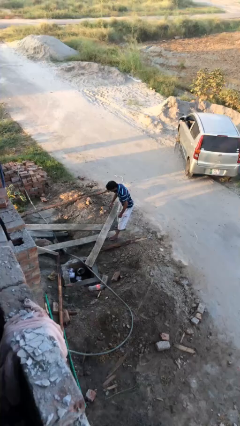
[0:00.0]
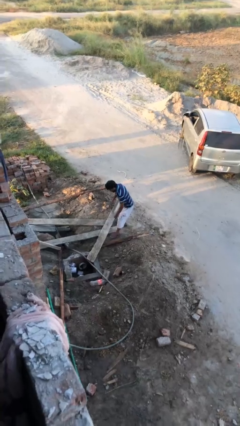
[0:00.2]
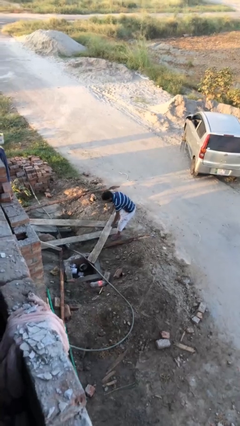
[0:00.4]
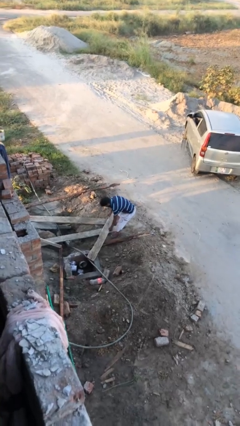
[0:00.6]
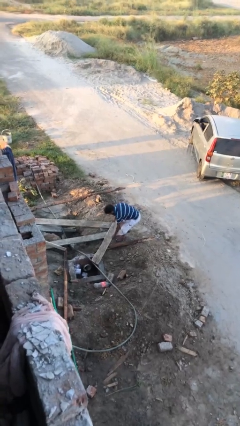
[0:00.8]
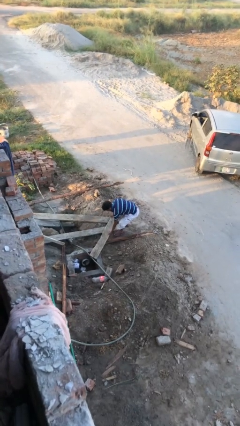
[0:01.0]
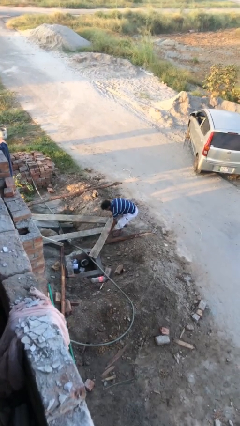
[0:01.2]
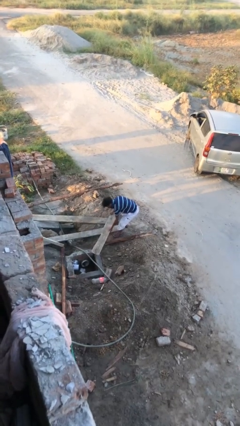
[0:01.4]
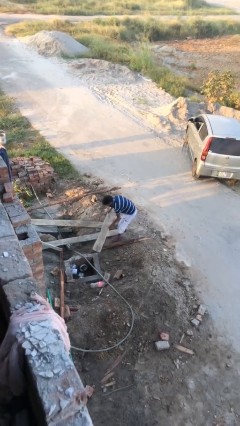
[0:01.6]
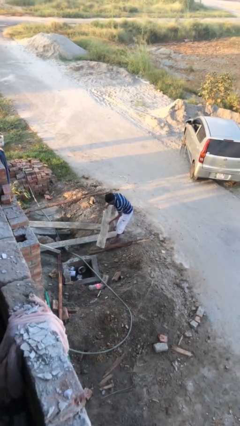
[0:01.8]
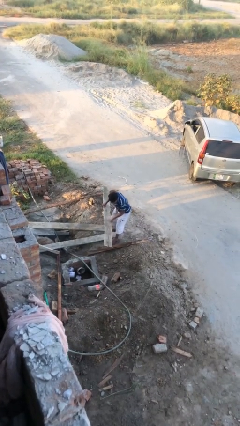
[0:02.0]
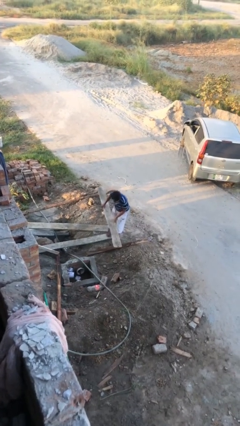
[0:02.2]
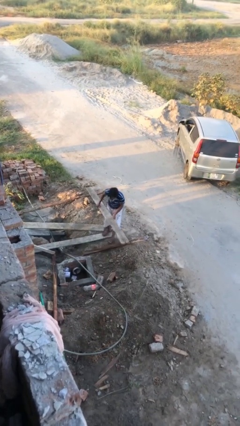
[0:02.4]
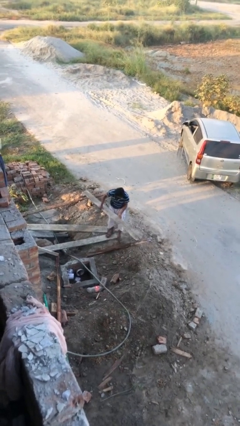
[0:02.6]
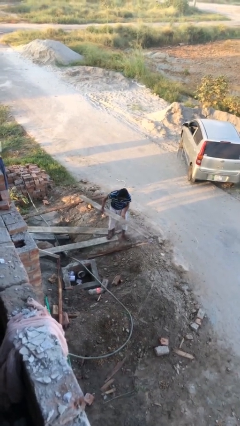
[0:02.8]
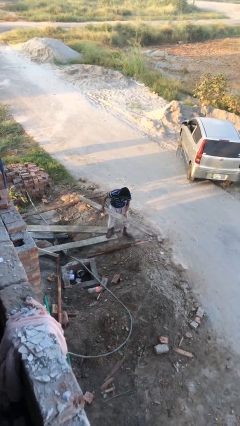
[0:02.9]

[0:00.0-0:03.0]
person picks up object from floor

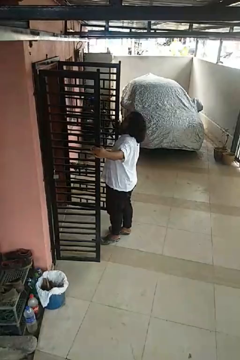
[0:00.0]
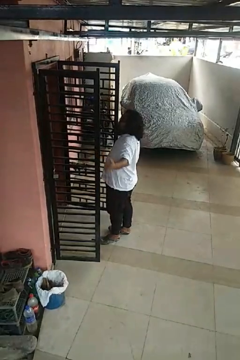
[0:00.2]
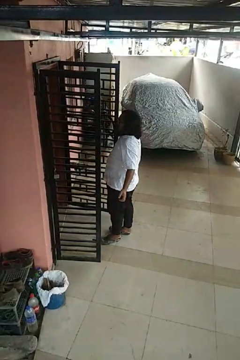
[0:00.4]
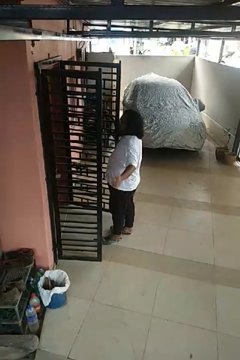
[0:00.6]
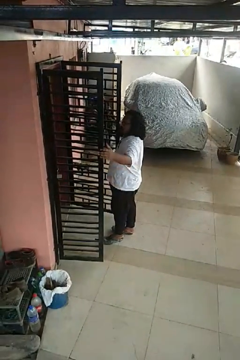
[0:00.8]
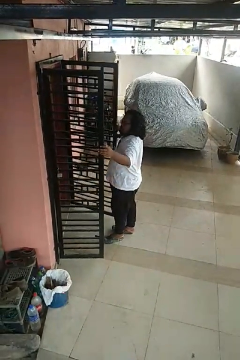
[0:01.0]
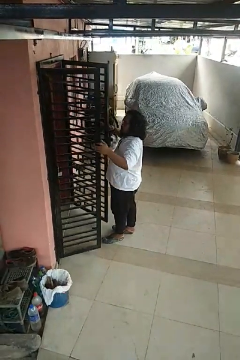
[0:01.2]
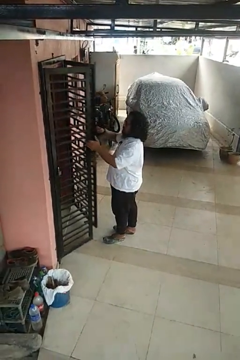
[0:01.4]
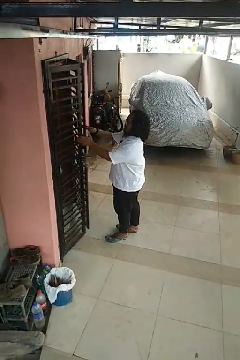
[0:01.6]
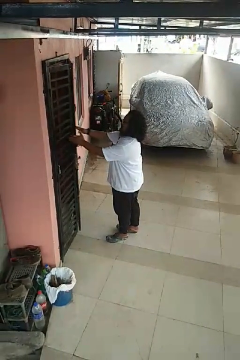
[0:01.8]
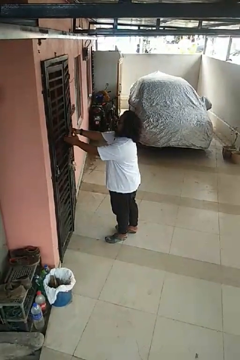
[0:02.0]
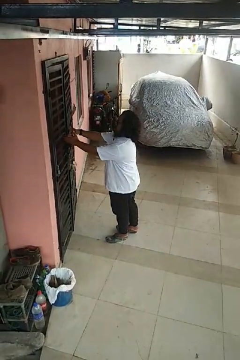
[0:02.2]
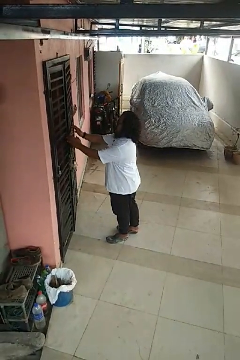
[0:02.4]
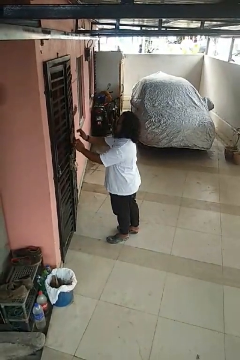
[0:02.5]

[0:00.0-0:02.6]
person closes gate

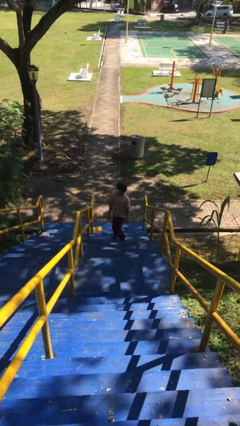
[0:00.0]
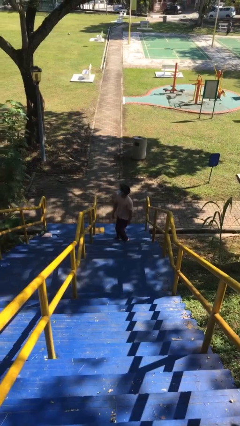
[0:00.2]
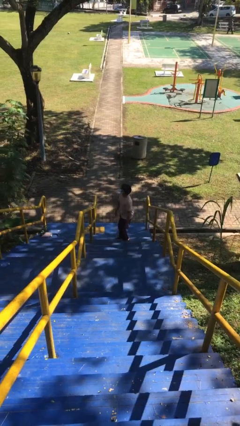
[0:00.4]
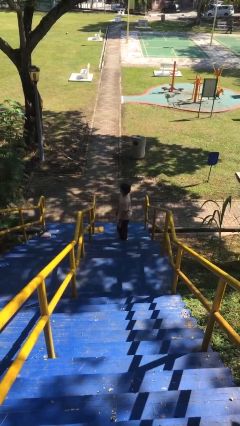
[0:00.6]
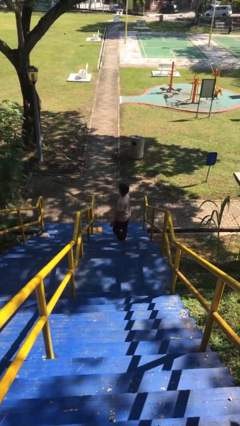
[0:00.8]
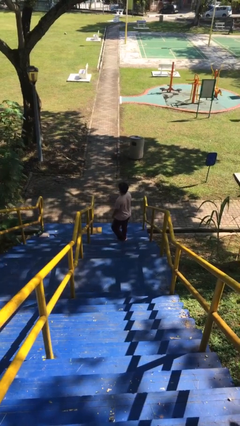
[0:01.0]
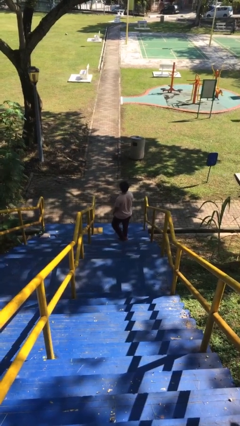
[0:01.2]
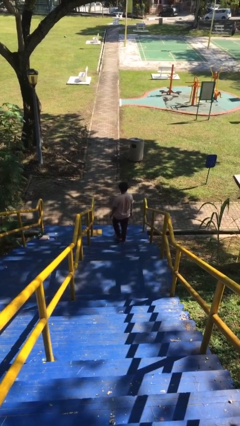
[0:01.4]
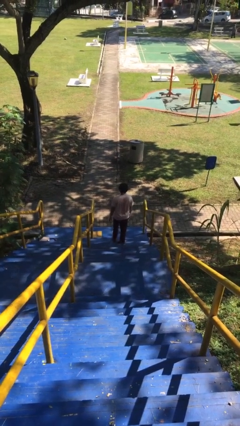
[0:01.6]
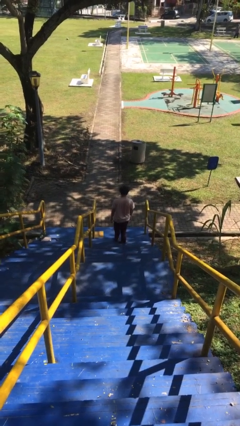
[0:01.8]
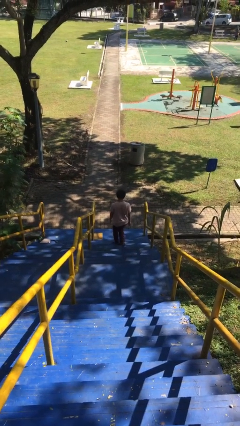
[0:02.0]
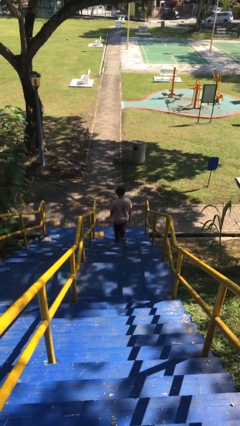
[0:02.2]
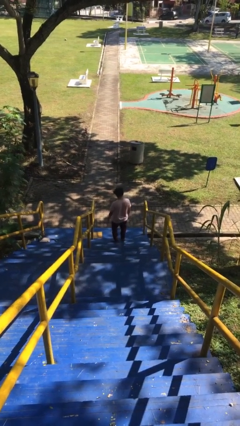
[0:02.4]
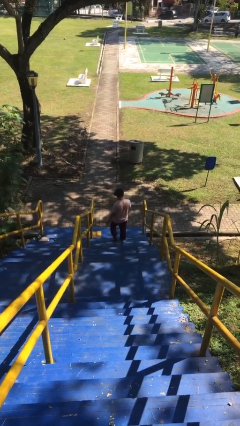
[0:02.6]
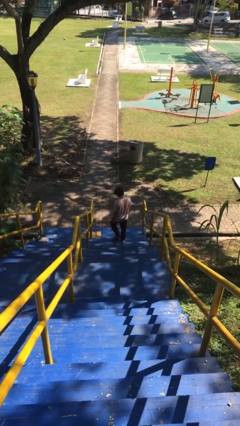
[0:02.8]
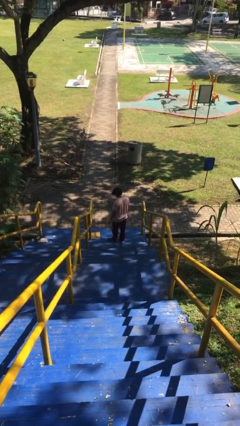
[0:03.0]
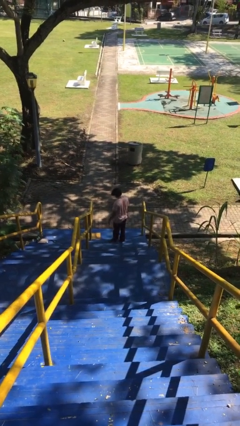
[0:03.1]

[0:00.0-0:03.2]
person climbs down stairs

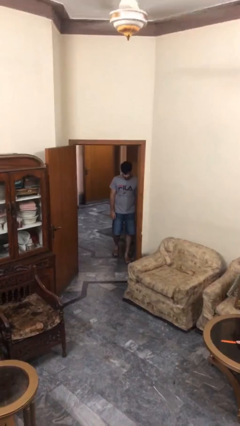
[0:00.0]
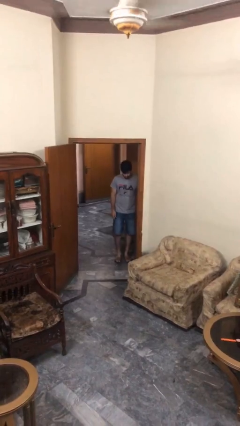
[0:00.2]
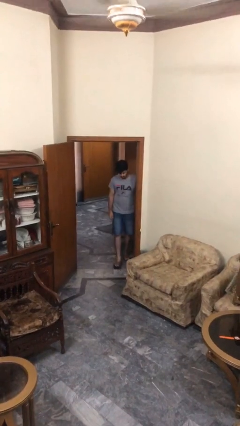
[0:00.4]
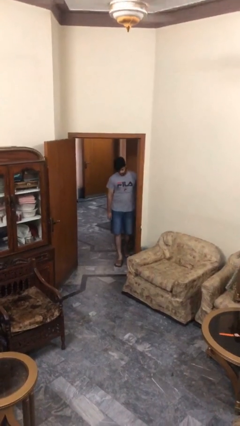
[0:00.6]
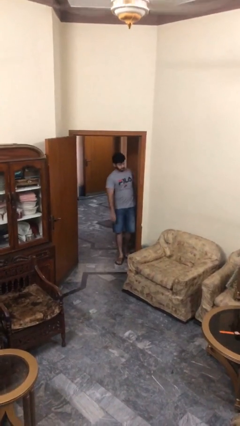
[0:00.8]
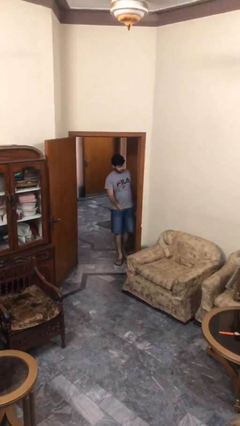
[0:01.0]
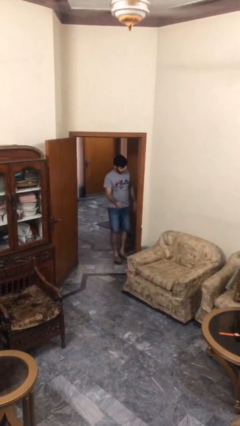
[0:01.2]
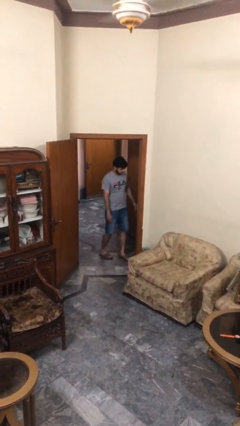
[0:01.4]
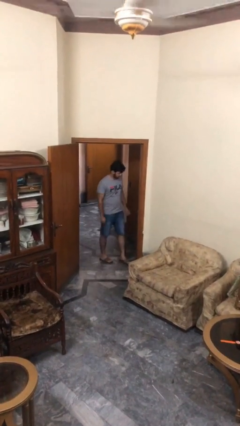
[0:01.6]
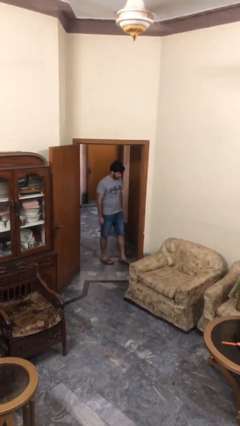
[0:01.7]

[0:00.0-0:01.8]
person bumps into wall

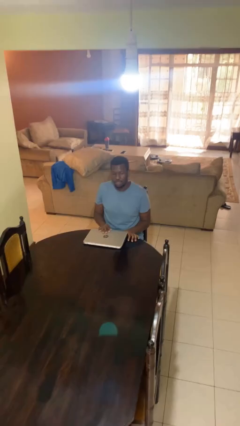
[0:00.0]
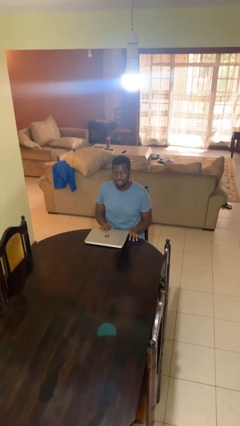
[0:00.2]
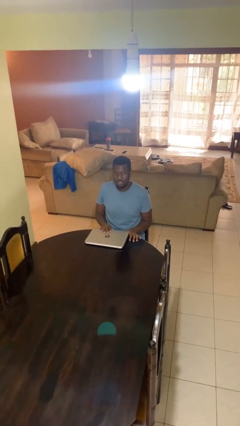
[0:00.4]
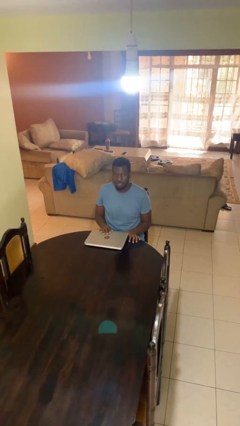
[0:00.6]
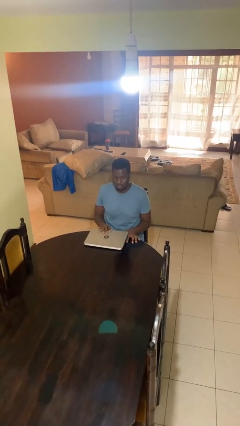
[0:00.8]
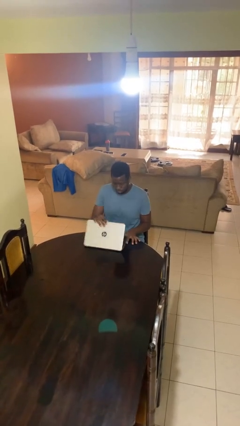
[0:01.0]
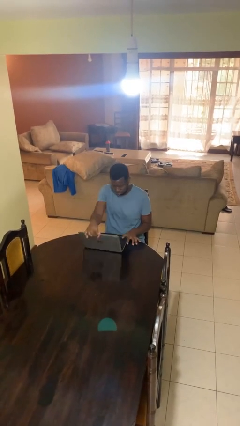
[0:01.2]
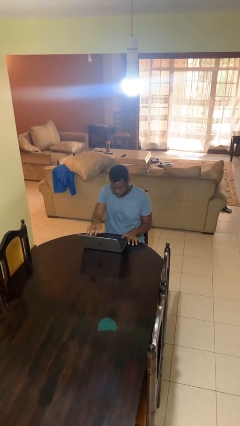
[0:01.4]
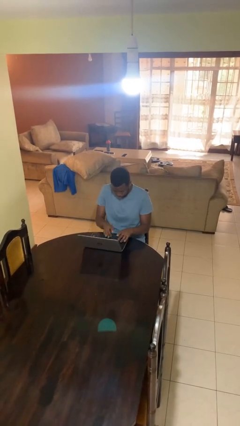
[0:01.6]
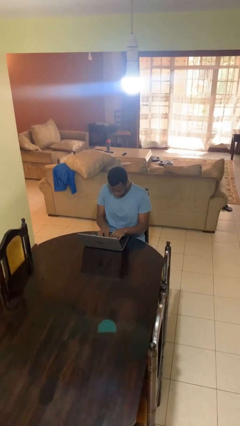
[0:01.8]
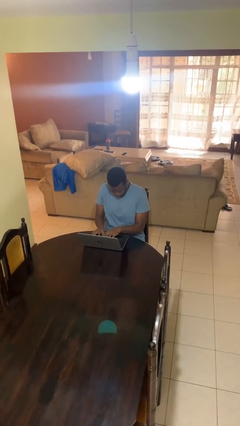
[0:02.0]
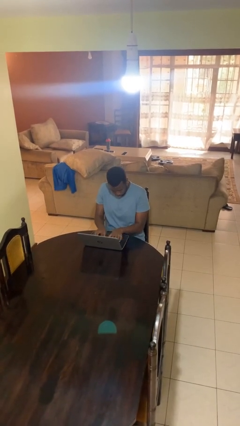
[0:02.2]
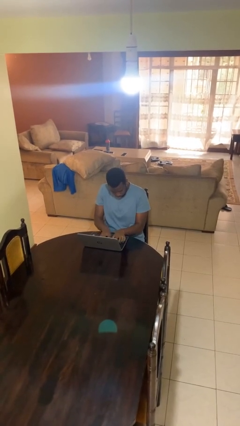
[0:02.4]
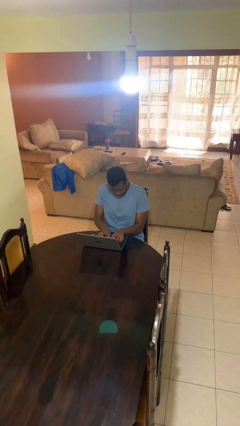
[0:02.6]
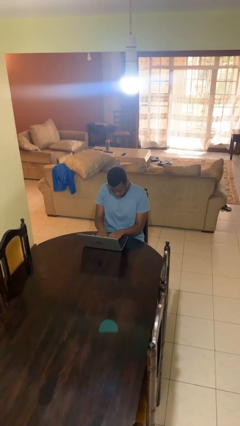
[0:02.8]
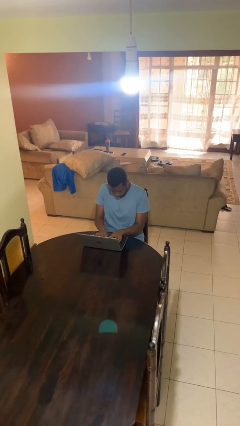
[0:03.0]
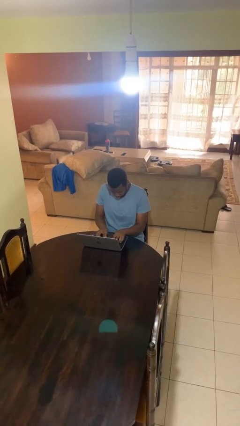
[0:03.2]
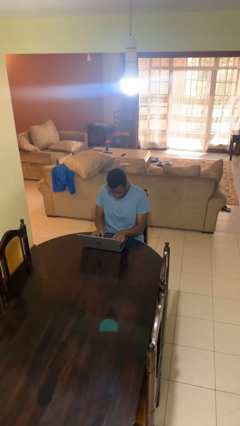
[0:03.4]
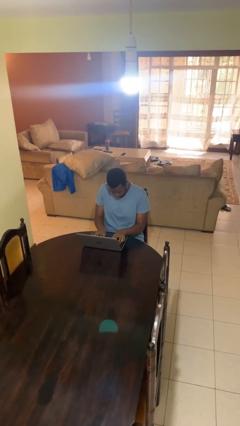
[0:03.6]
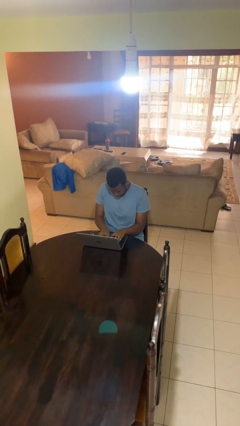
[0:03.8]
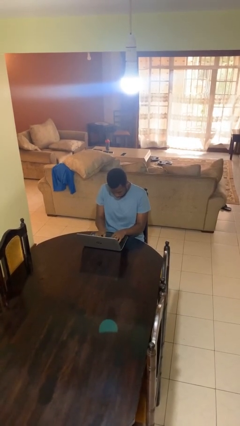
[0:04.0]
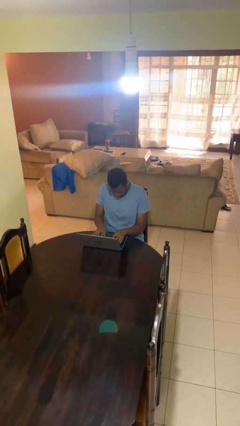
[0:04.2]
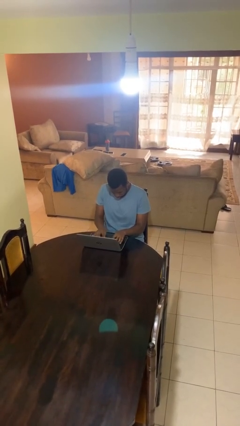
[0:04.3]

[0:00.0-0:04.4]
person interacts with laptop

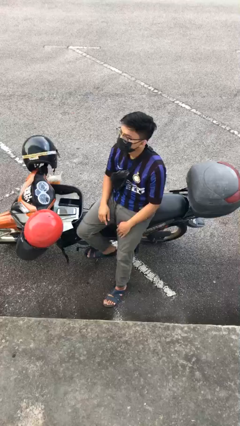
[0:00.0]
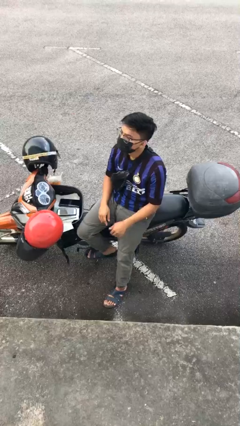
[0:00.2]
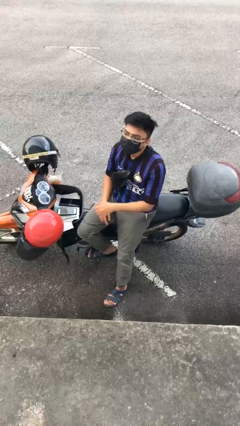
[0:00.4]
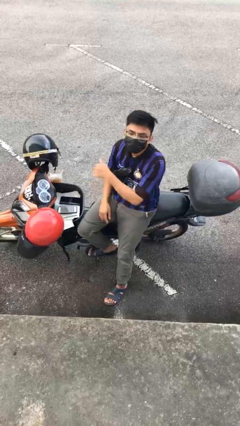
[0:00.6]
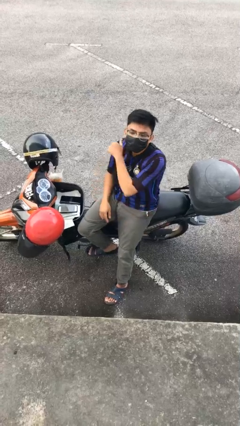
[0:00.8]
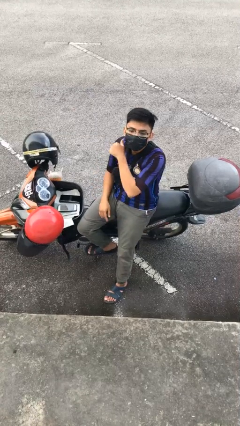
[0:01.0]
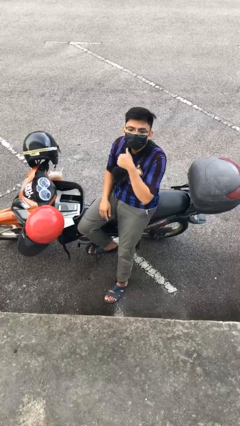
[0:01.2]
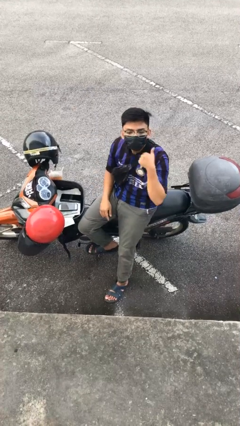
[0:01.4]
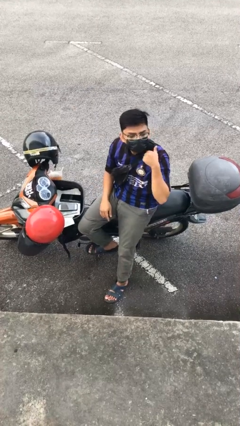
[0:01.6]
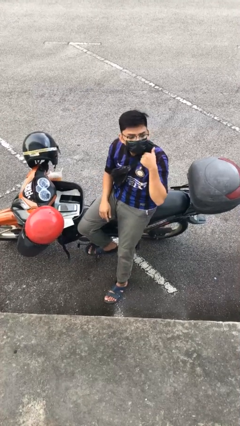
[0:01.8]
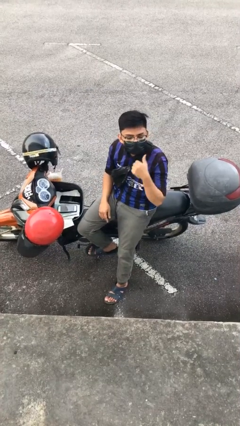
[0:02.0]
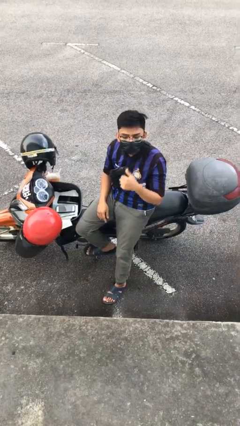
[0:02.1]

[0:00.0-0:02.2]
person gestures cut

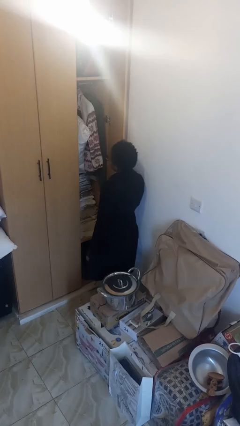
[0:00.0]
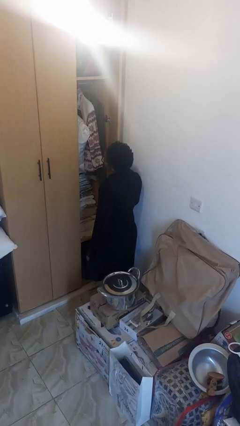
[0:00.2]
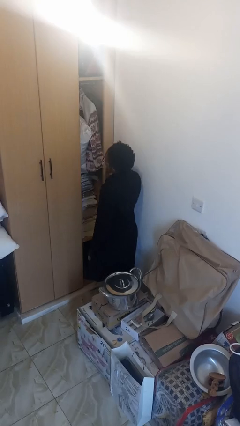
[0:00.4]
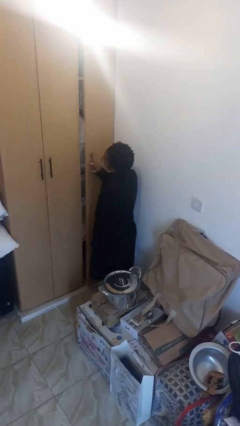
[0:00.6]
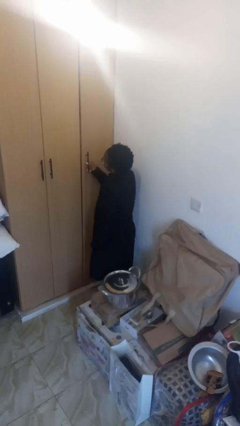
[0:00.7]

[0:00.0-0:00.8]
person closes closet door
